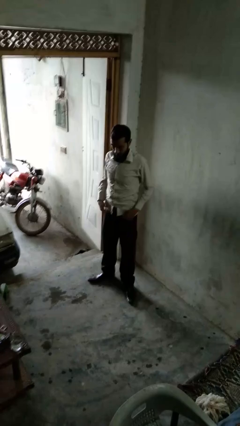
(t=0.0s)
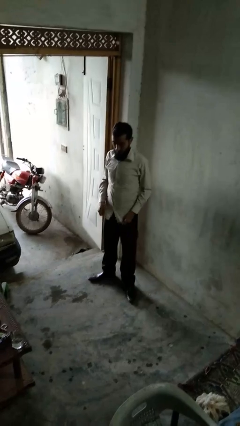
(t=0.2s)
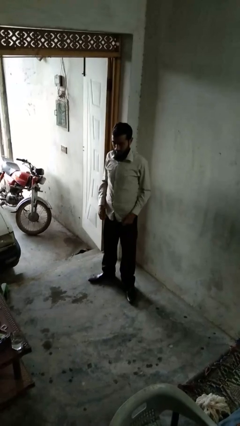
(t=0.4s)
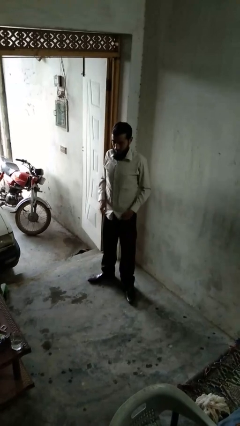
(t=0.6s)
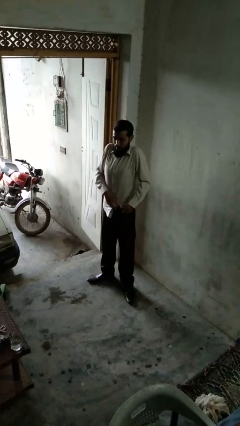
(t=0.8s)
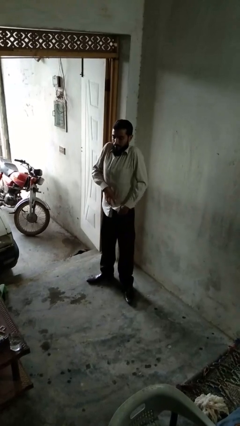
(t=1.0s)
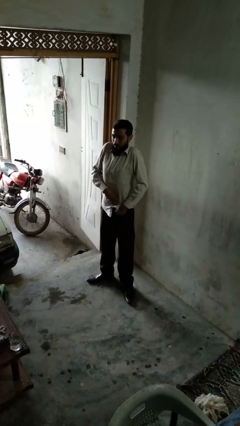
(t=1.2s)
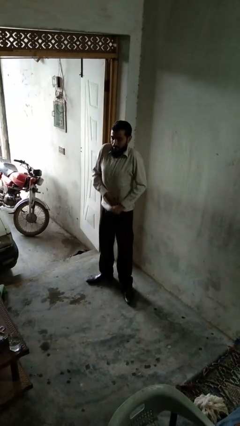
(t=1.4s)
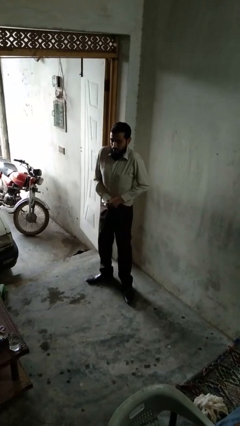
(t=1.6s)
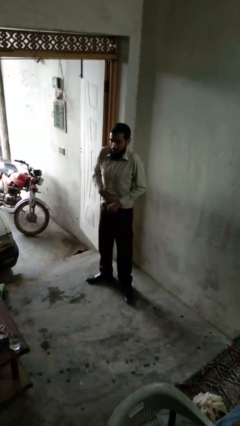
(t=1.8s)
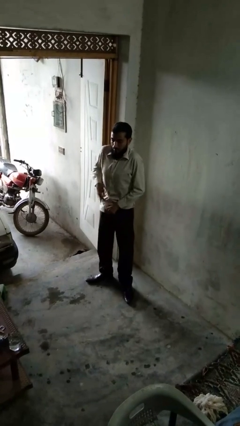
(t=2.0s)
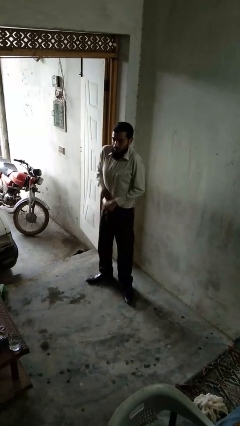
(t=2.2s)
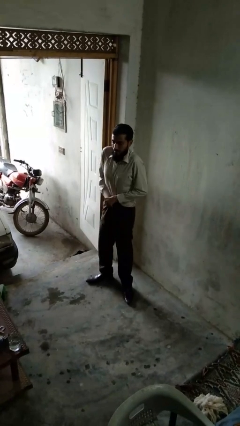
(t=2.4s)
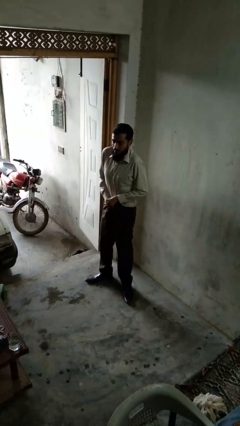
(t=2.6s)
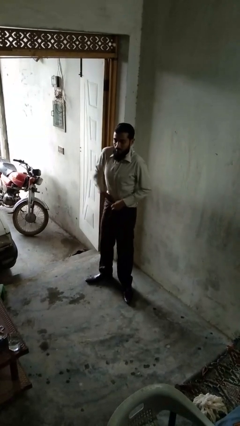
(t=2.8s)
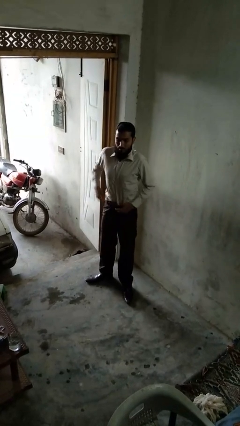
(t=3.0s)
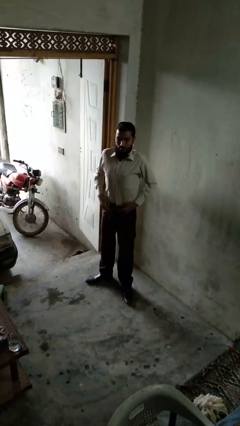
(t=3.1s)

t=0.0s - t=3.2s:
person tucks in shirt

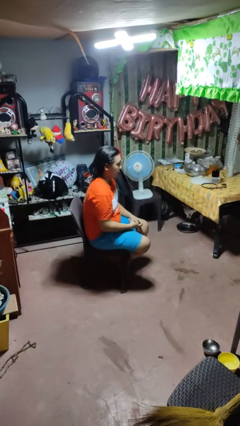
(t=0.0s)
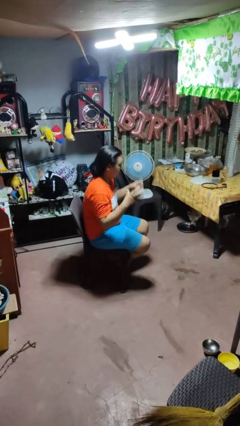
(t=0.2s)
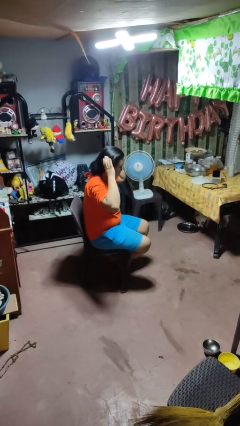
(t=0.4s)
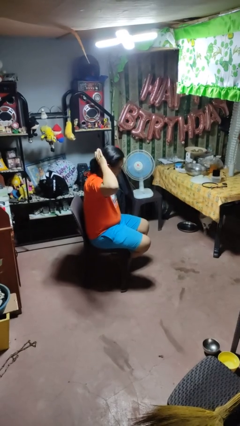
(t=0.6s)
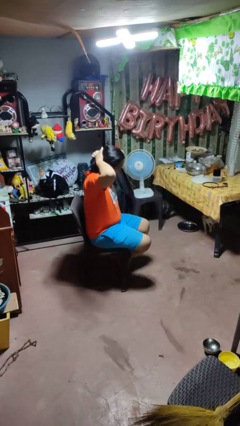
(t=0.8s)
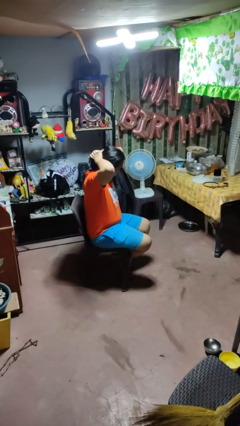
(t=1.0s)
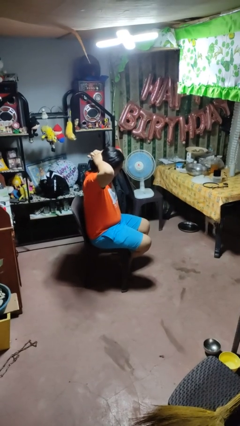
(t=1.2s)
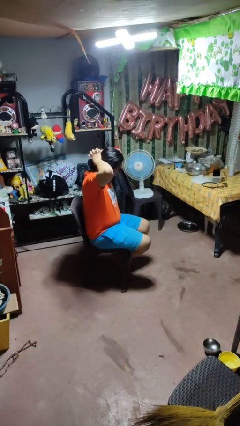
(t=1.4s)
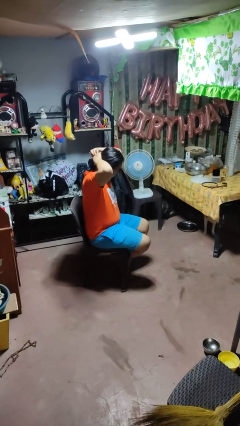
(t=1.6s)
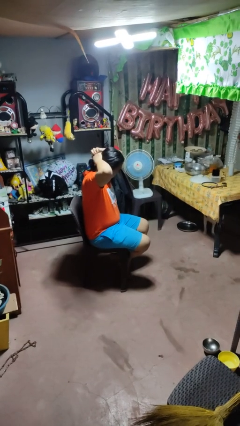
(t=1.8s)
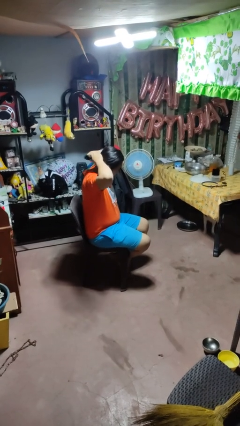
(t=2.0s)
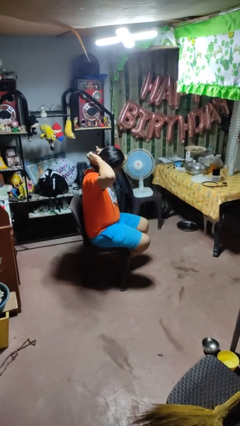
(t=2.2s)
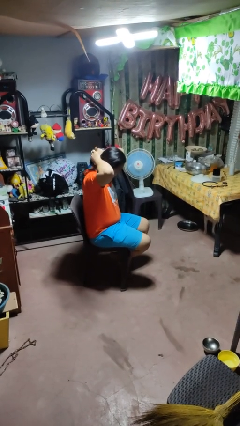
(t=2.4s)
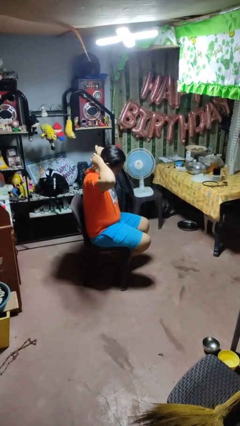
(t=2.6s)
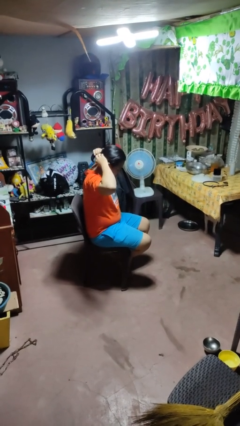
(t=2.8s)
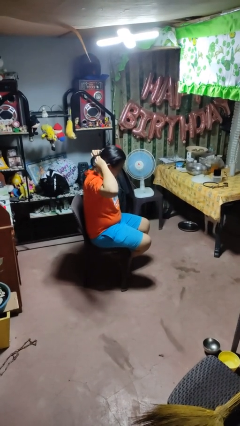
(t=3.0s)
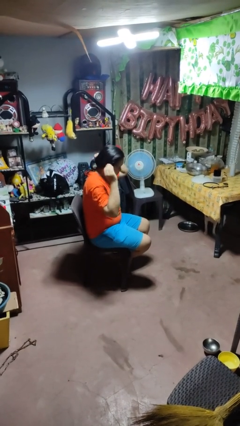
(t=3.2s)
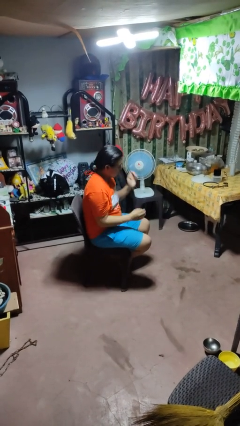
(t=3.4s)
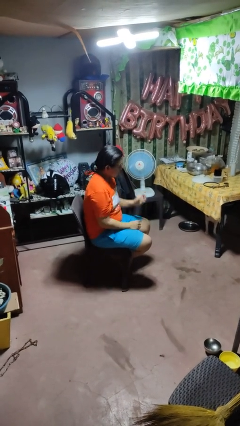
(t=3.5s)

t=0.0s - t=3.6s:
person puts hair in ponytail

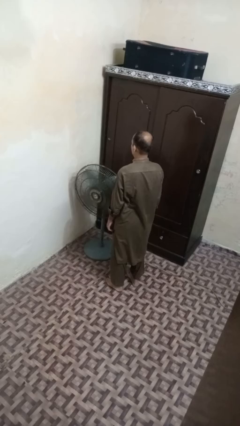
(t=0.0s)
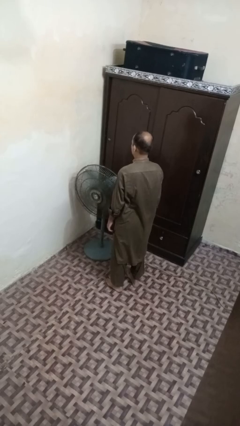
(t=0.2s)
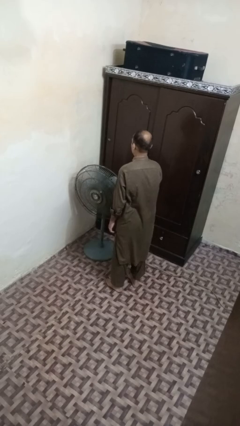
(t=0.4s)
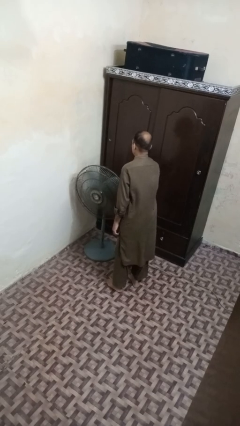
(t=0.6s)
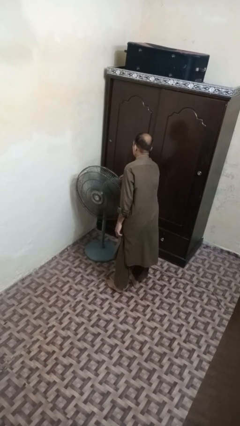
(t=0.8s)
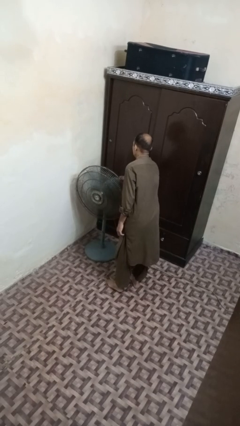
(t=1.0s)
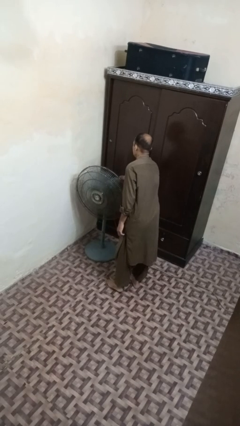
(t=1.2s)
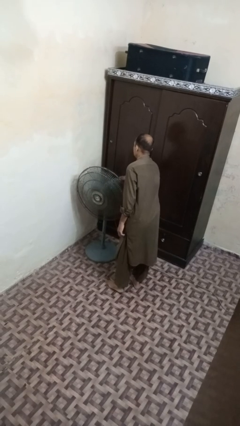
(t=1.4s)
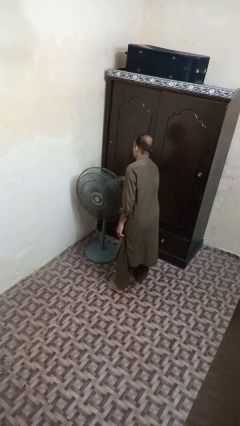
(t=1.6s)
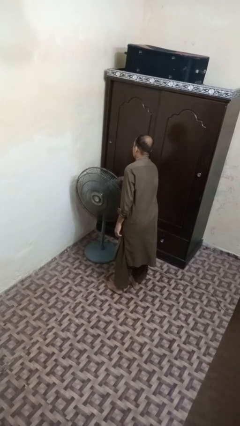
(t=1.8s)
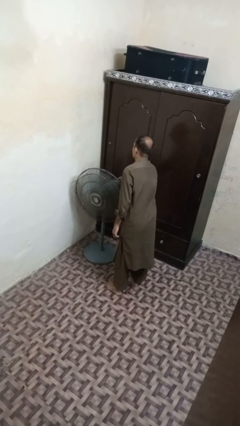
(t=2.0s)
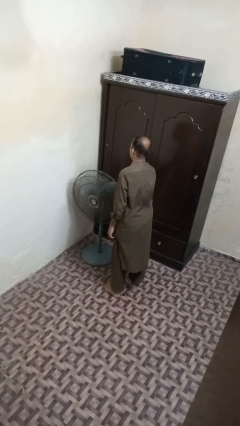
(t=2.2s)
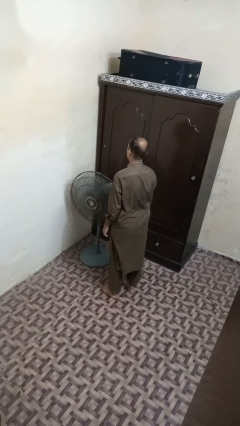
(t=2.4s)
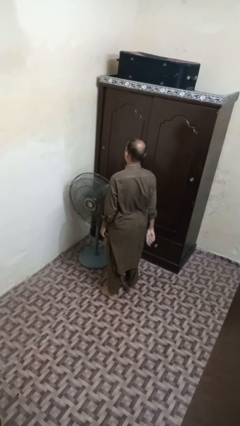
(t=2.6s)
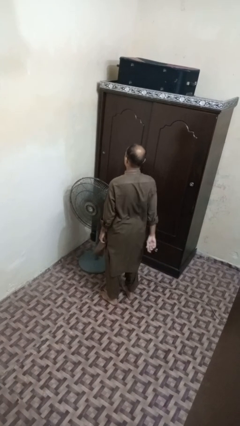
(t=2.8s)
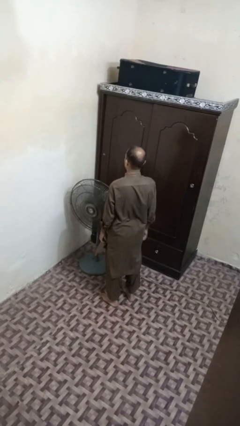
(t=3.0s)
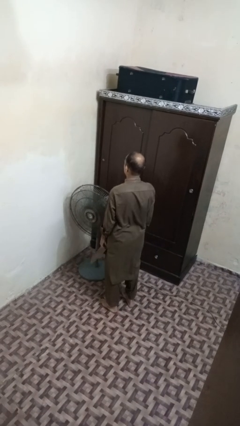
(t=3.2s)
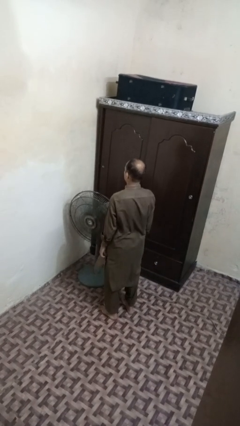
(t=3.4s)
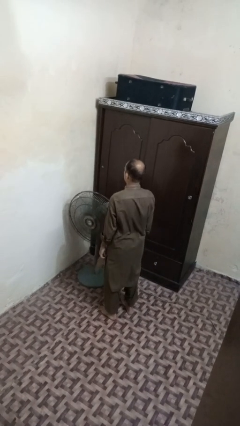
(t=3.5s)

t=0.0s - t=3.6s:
person turns off fan

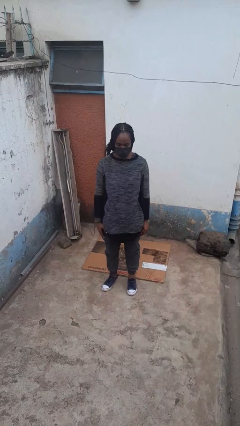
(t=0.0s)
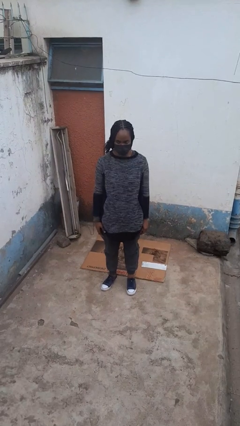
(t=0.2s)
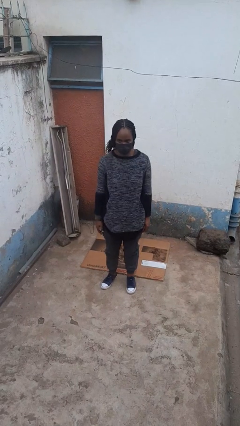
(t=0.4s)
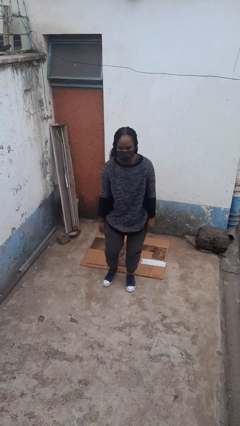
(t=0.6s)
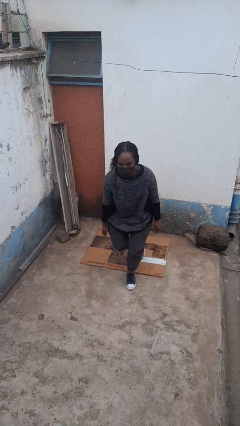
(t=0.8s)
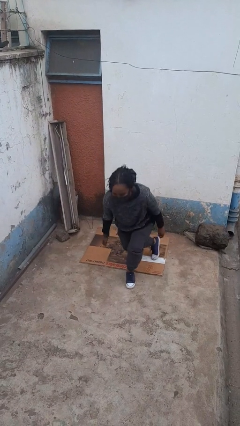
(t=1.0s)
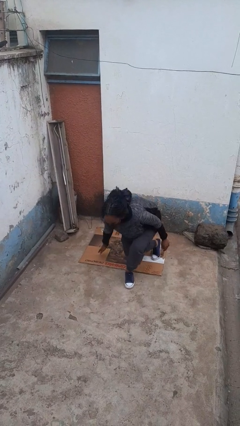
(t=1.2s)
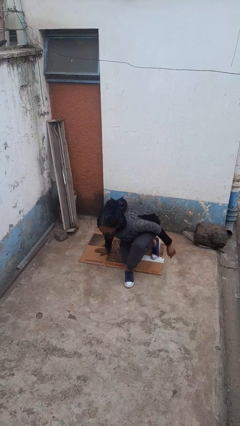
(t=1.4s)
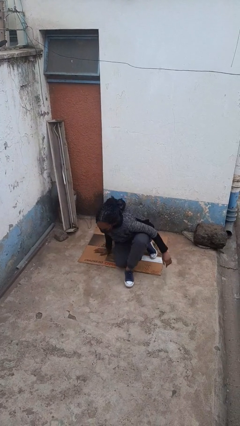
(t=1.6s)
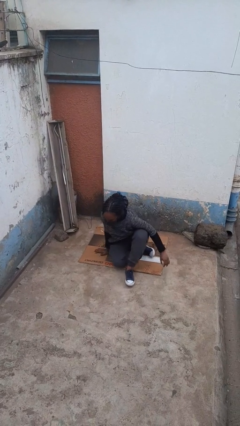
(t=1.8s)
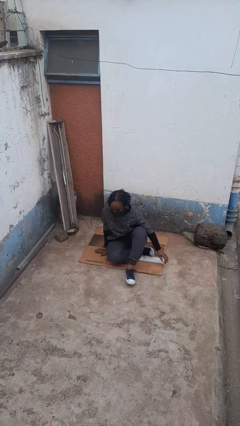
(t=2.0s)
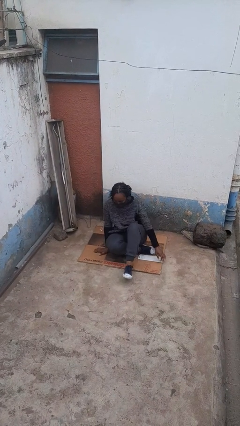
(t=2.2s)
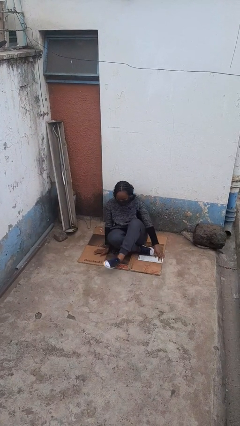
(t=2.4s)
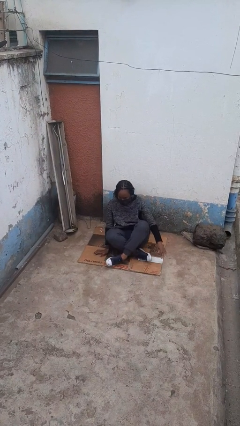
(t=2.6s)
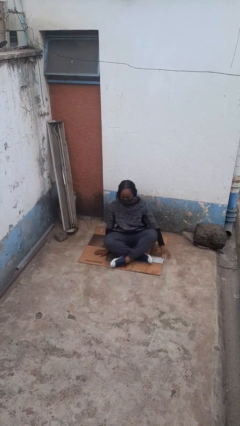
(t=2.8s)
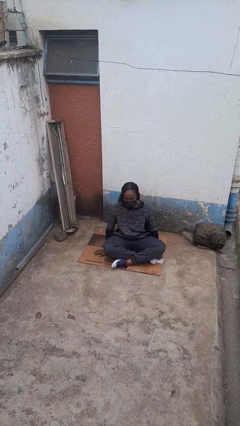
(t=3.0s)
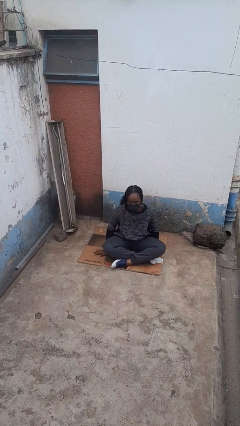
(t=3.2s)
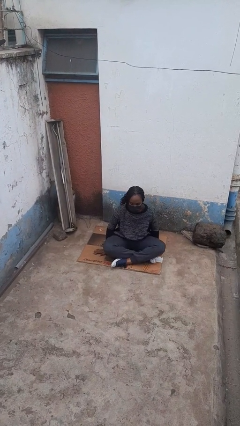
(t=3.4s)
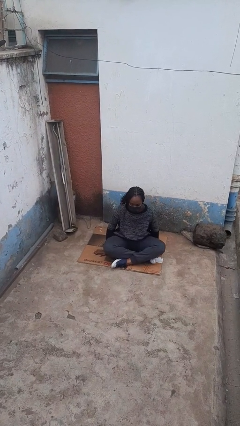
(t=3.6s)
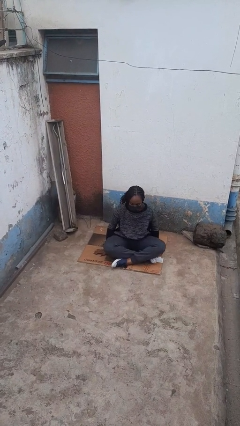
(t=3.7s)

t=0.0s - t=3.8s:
person sits crisscross

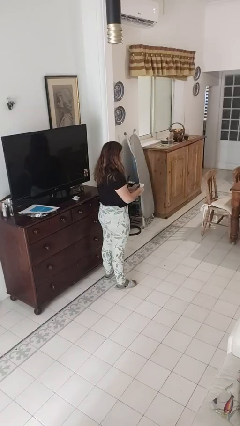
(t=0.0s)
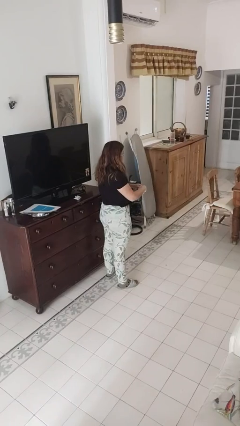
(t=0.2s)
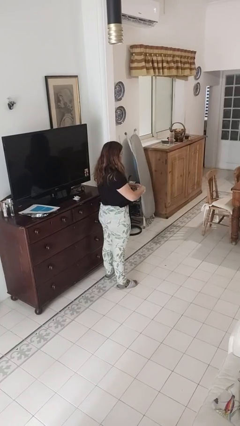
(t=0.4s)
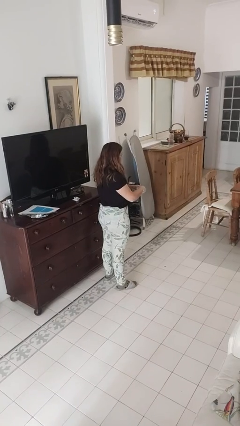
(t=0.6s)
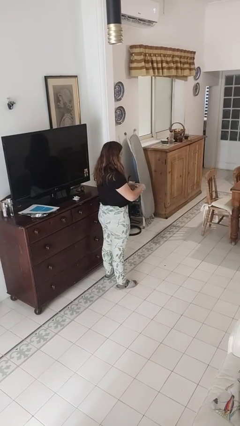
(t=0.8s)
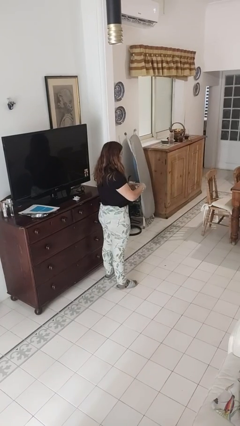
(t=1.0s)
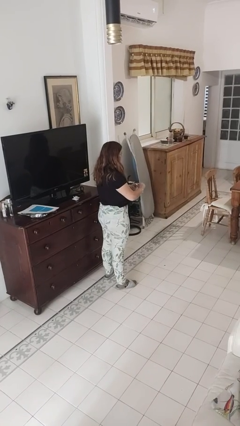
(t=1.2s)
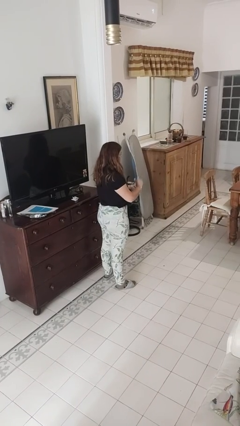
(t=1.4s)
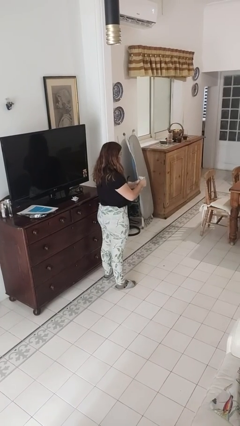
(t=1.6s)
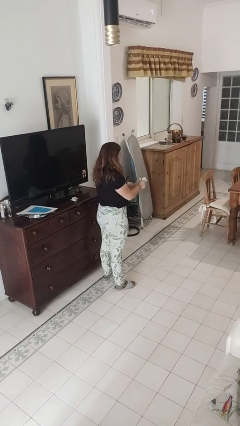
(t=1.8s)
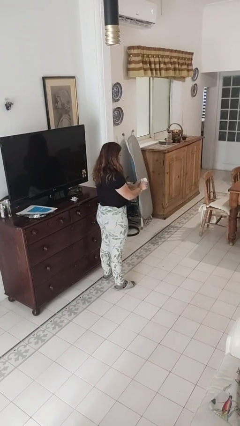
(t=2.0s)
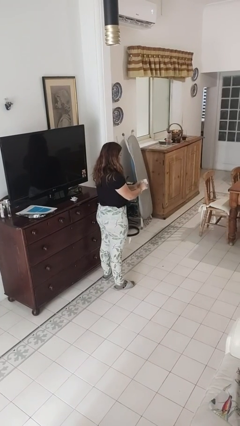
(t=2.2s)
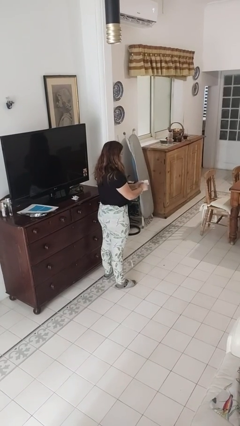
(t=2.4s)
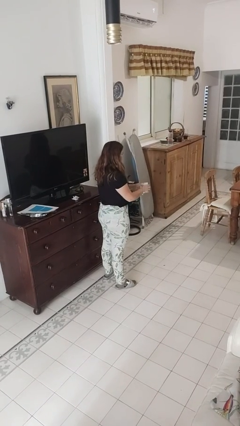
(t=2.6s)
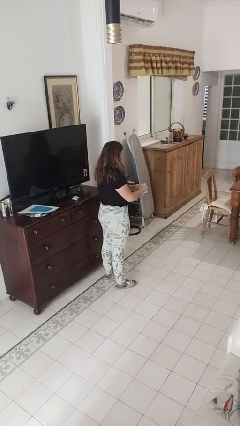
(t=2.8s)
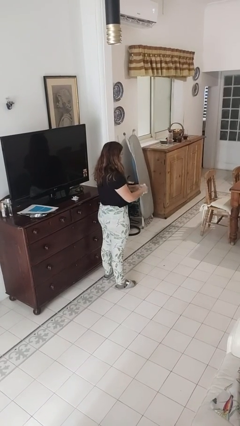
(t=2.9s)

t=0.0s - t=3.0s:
person tears paper

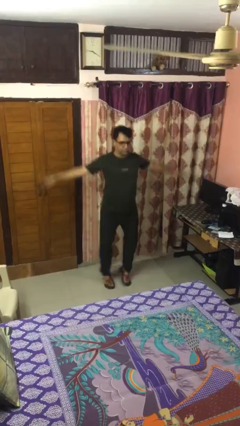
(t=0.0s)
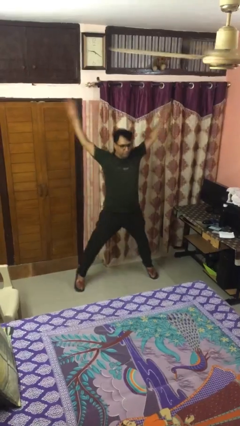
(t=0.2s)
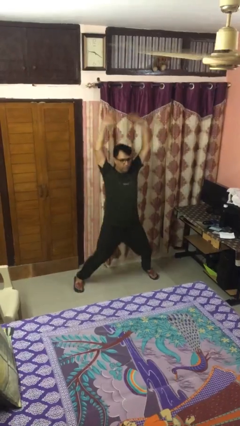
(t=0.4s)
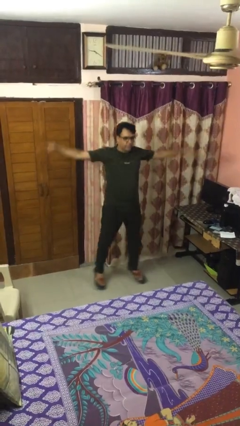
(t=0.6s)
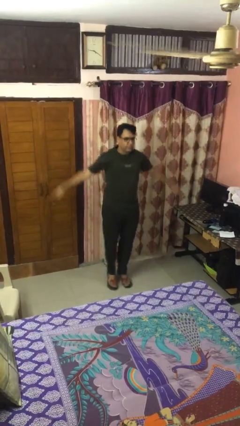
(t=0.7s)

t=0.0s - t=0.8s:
person exercises with jumping jacks
